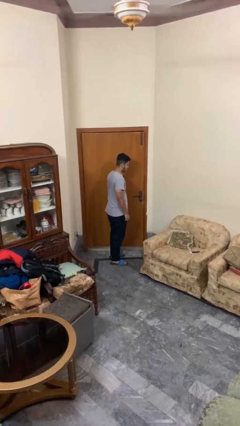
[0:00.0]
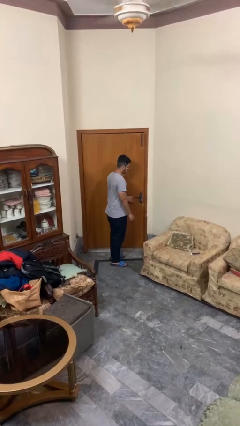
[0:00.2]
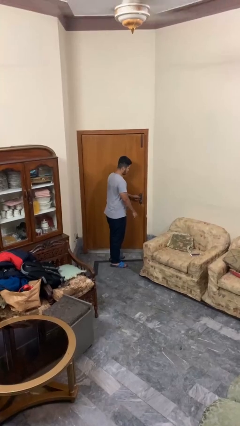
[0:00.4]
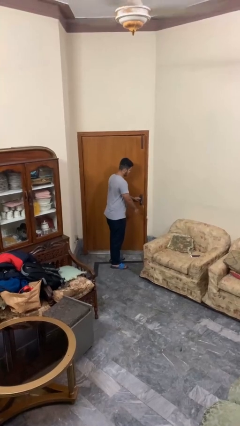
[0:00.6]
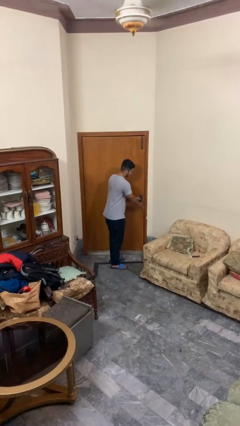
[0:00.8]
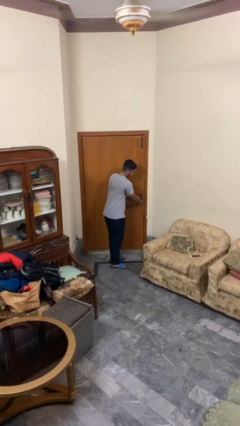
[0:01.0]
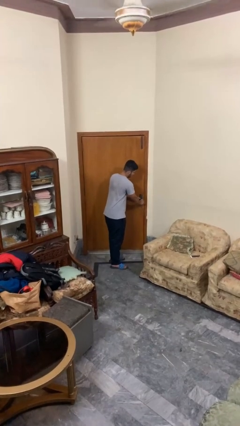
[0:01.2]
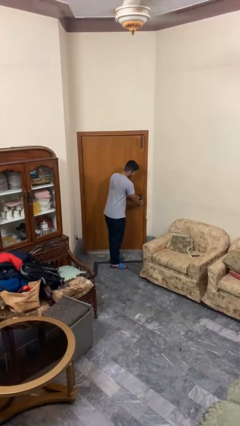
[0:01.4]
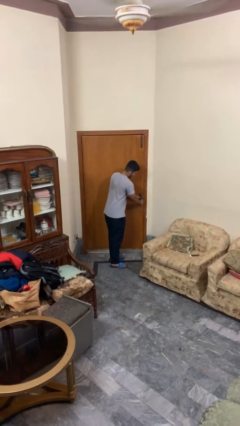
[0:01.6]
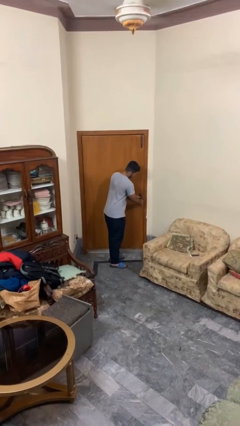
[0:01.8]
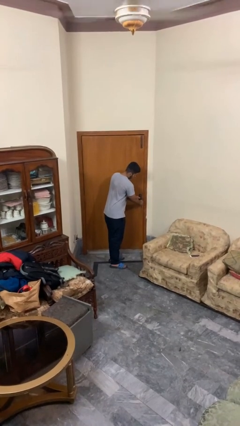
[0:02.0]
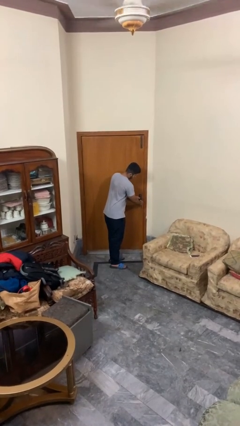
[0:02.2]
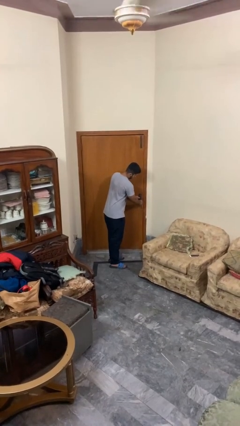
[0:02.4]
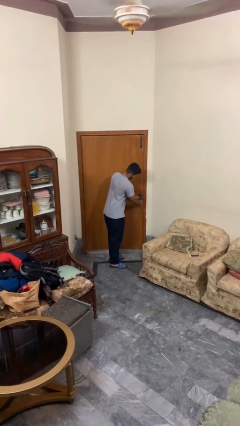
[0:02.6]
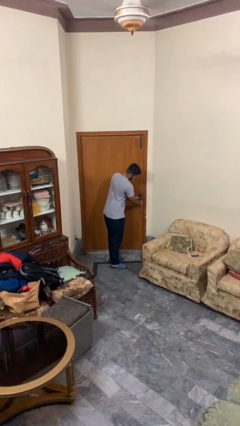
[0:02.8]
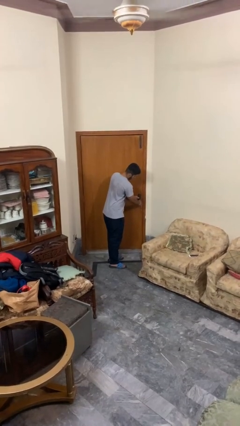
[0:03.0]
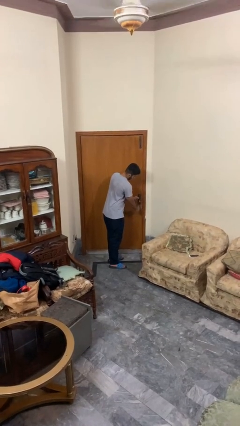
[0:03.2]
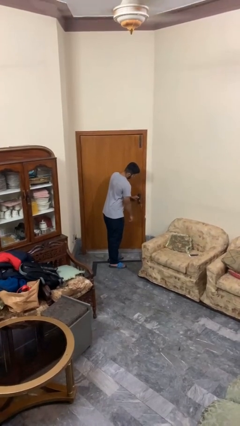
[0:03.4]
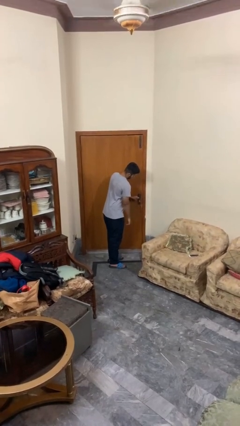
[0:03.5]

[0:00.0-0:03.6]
person unlocks door with keys

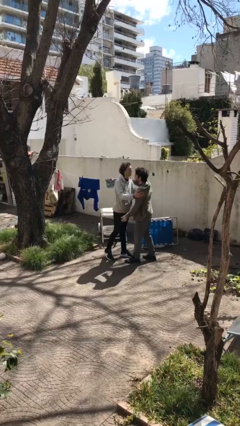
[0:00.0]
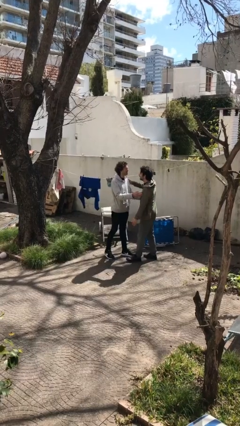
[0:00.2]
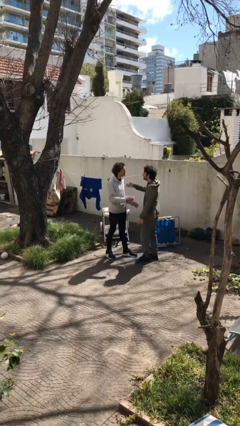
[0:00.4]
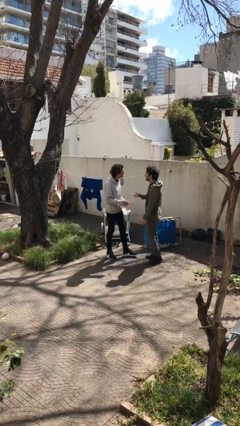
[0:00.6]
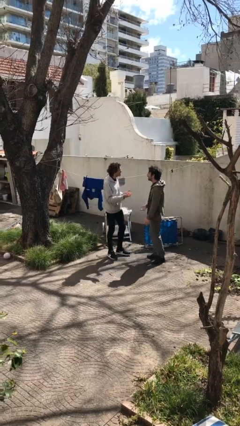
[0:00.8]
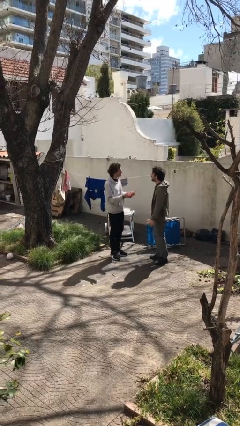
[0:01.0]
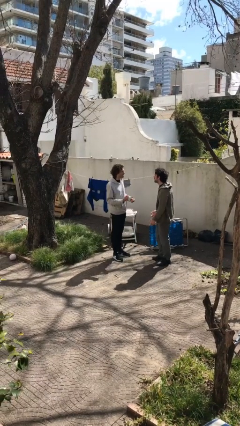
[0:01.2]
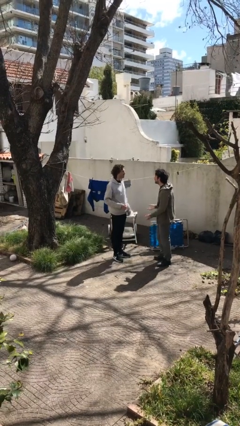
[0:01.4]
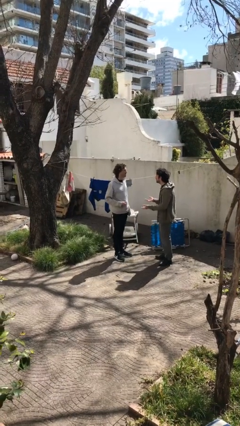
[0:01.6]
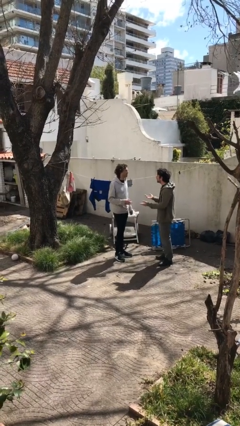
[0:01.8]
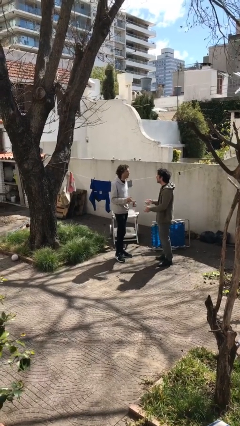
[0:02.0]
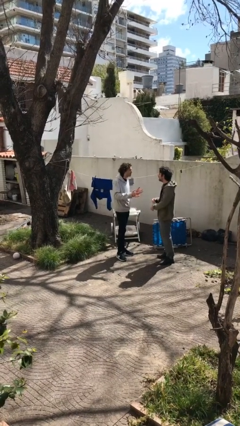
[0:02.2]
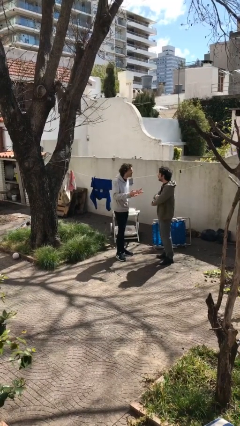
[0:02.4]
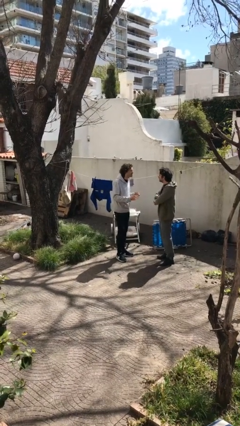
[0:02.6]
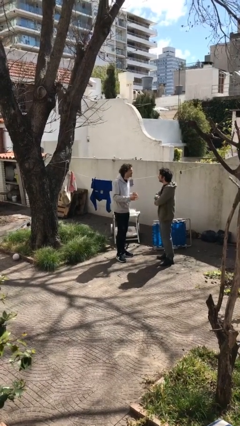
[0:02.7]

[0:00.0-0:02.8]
person talks to person

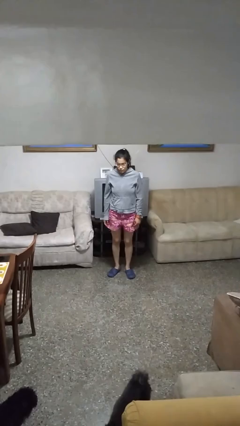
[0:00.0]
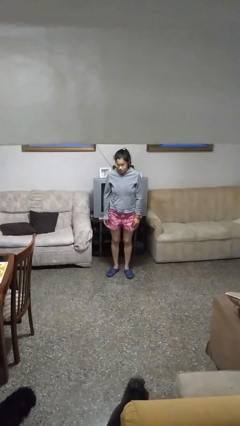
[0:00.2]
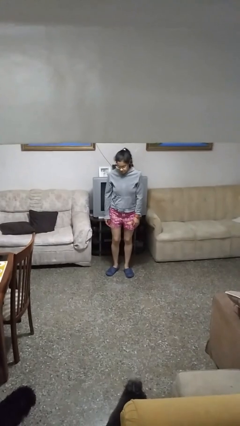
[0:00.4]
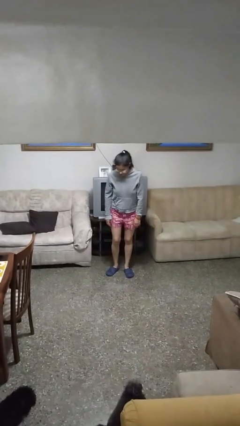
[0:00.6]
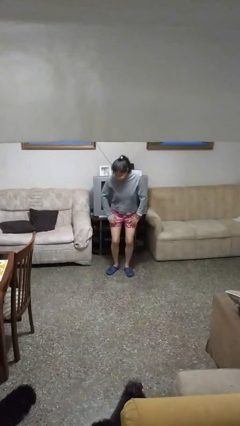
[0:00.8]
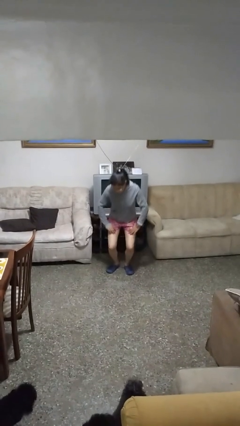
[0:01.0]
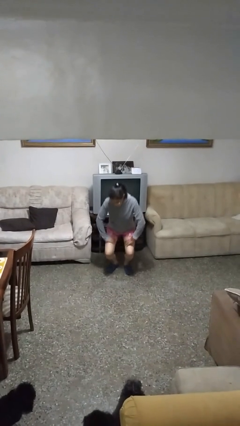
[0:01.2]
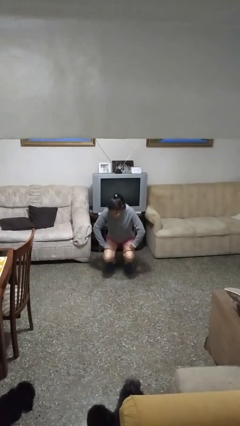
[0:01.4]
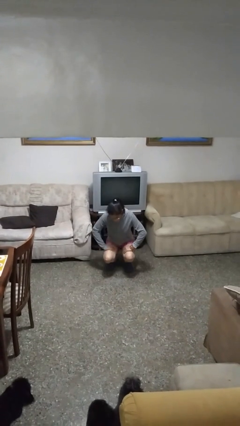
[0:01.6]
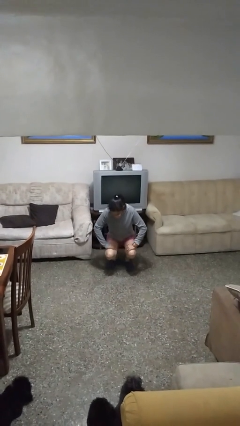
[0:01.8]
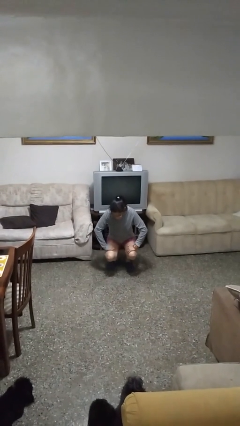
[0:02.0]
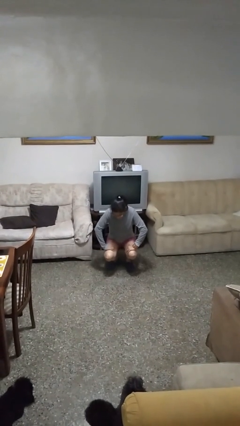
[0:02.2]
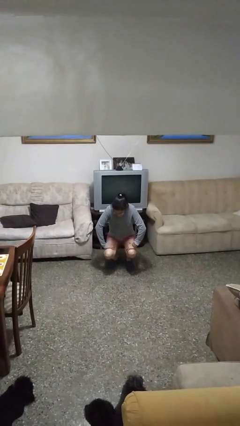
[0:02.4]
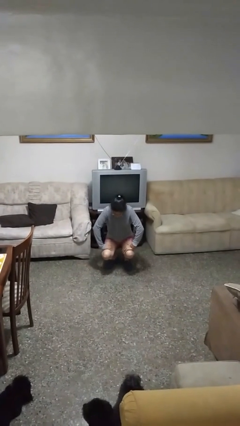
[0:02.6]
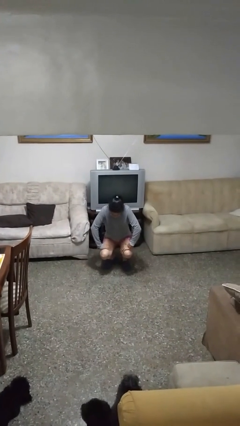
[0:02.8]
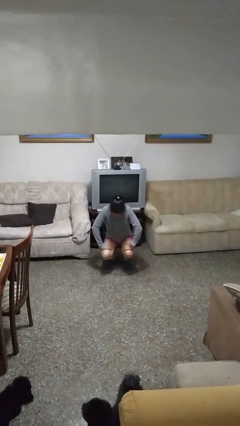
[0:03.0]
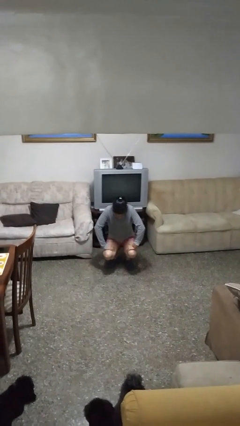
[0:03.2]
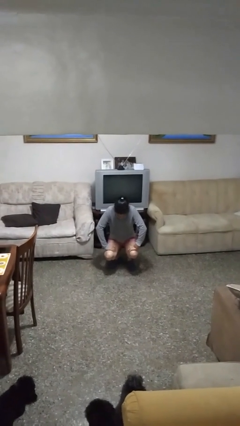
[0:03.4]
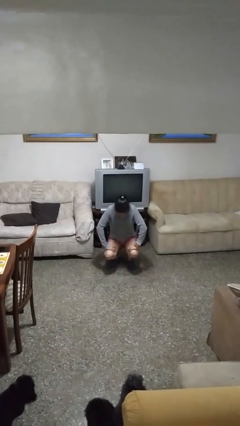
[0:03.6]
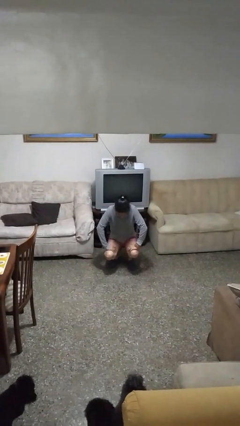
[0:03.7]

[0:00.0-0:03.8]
person squats

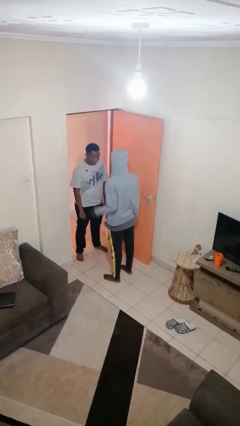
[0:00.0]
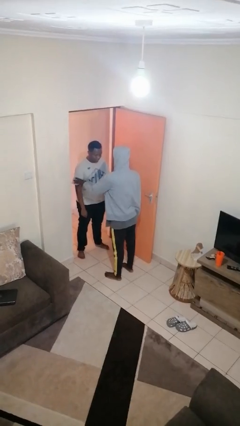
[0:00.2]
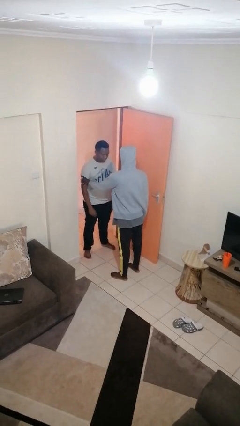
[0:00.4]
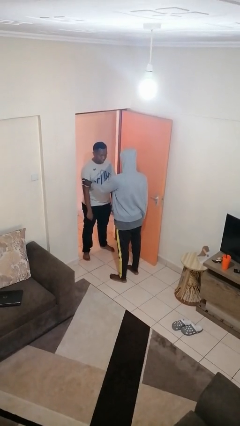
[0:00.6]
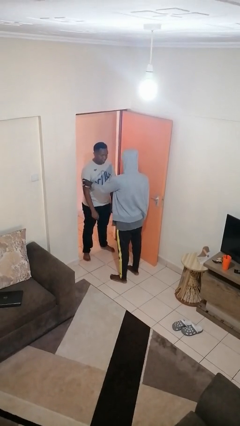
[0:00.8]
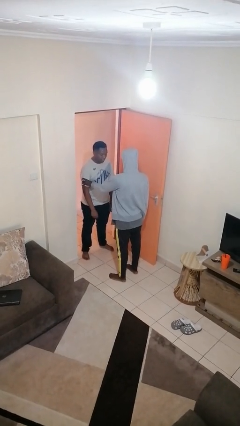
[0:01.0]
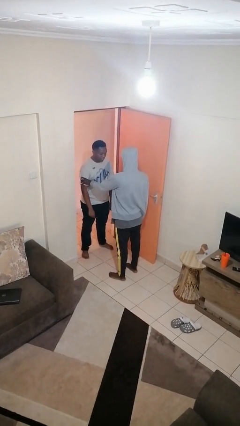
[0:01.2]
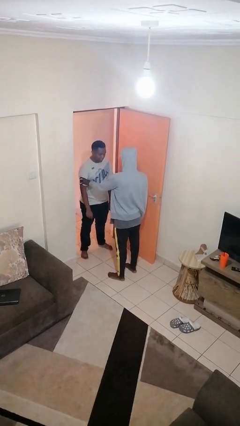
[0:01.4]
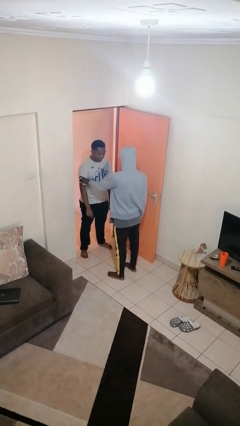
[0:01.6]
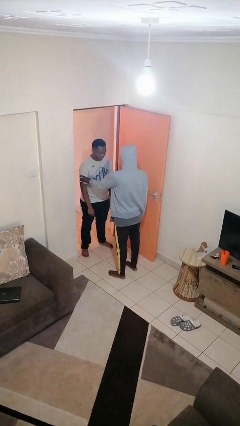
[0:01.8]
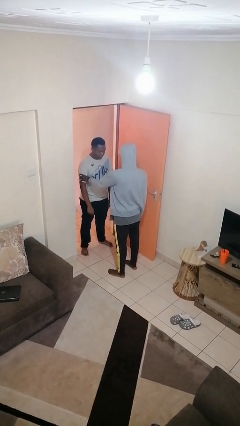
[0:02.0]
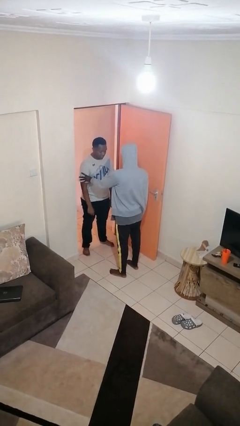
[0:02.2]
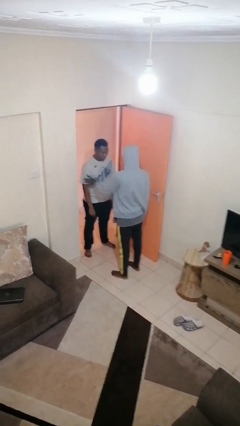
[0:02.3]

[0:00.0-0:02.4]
person grabs person by bicep

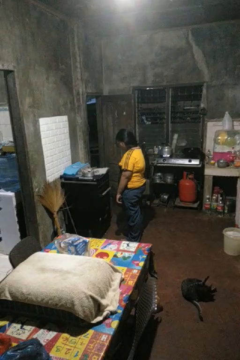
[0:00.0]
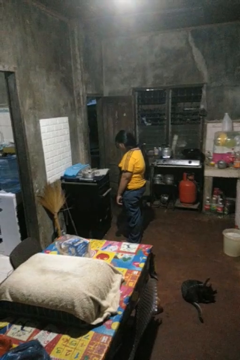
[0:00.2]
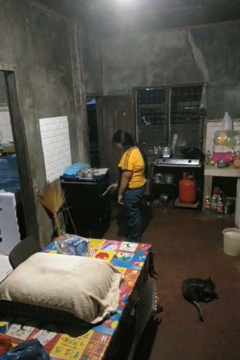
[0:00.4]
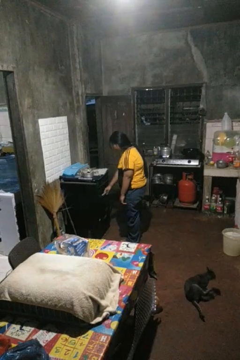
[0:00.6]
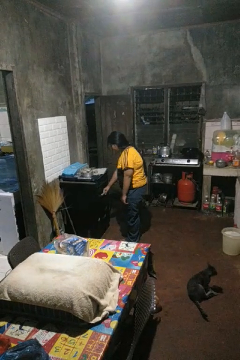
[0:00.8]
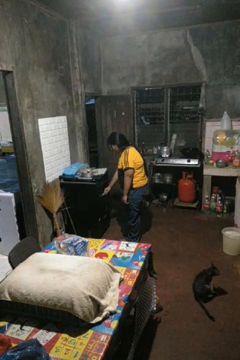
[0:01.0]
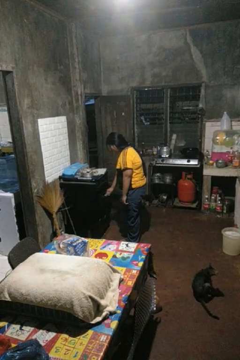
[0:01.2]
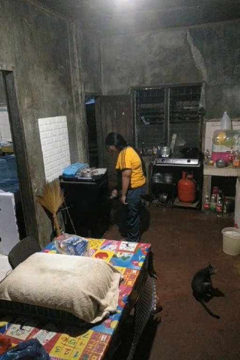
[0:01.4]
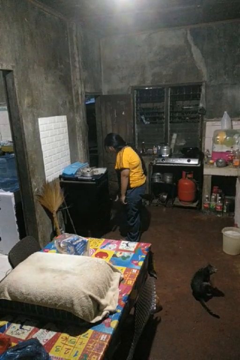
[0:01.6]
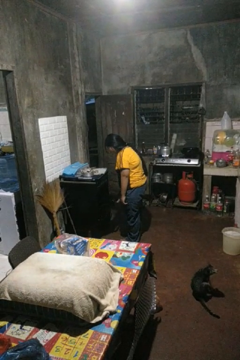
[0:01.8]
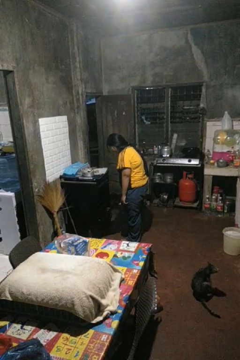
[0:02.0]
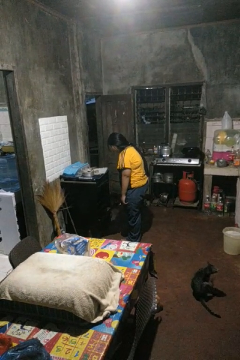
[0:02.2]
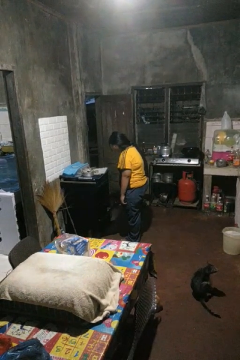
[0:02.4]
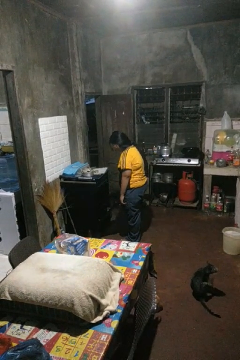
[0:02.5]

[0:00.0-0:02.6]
person opens oven door

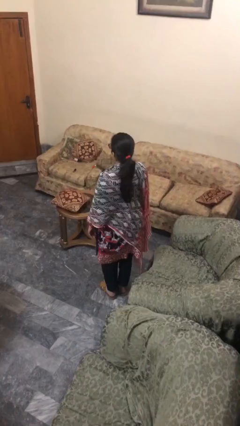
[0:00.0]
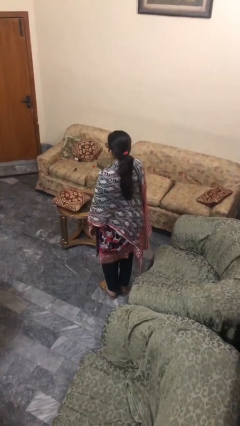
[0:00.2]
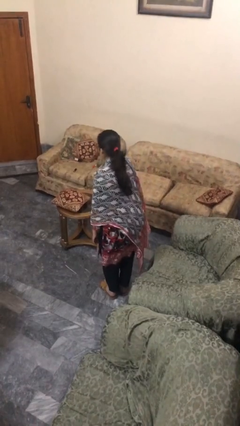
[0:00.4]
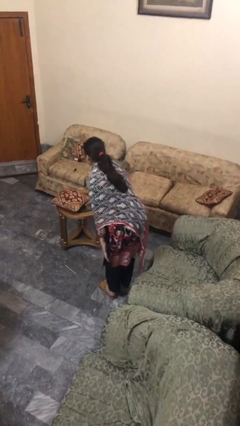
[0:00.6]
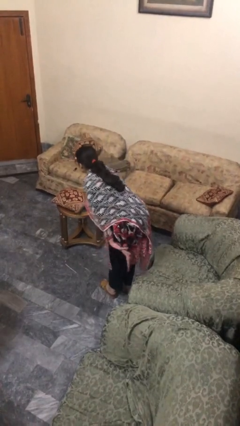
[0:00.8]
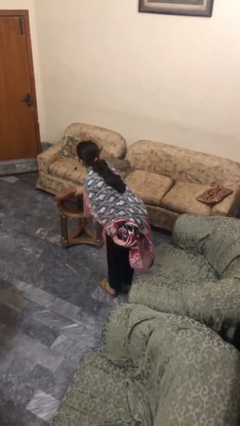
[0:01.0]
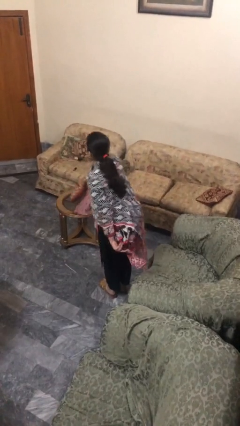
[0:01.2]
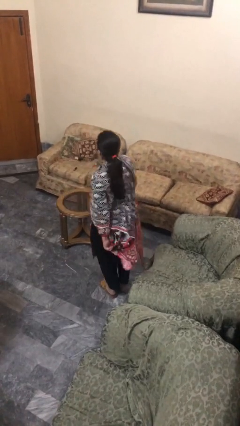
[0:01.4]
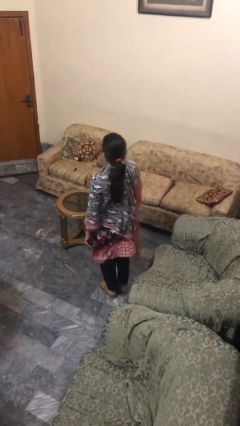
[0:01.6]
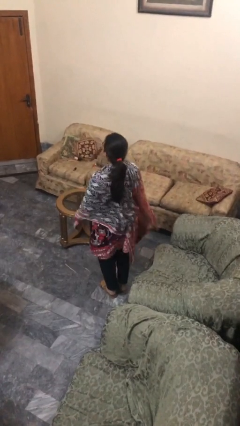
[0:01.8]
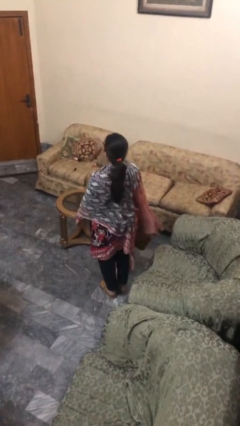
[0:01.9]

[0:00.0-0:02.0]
person picks up object from table

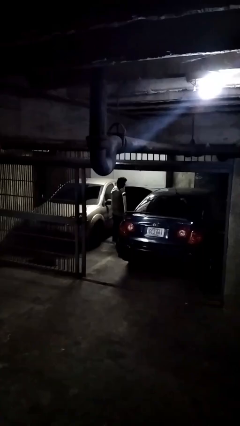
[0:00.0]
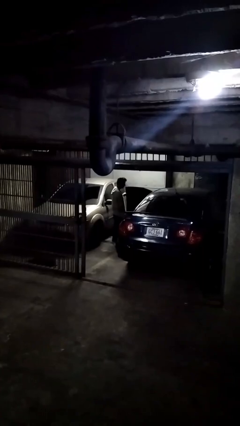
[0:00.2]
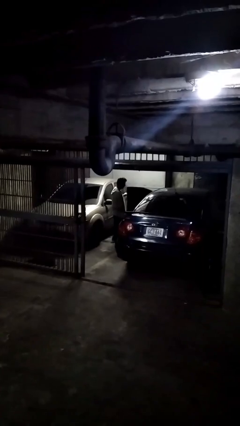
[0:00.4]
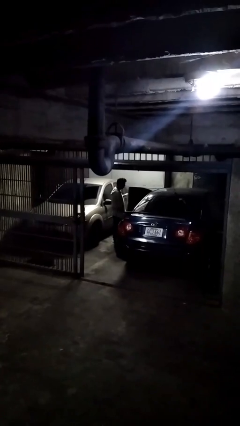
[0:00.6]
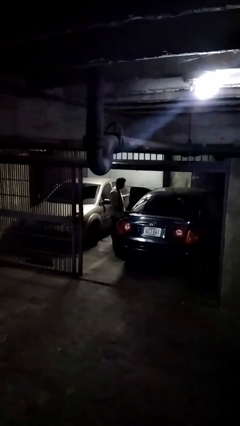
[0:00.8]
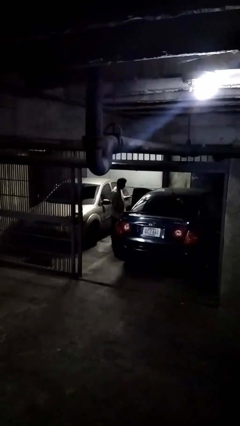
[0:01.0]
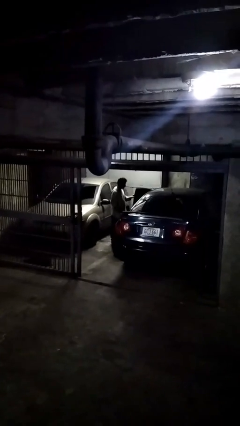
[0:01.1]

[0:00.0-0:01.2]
person closes car door
